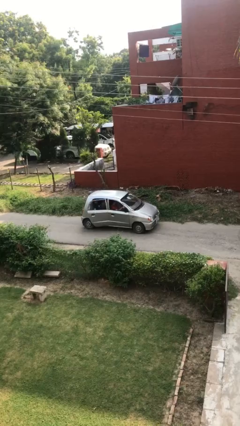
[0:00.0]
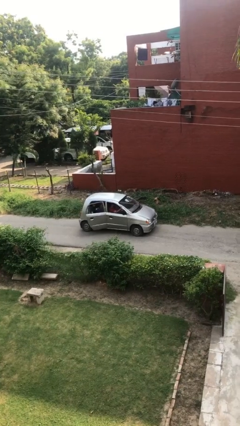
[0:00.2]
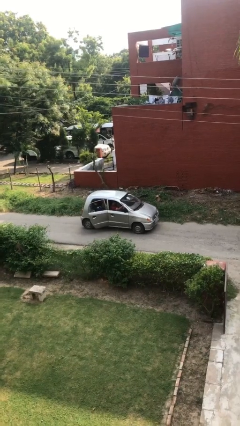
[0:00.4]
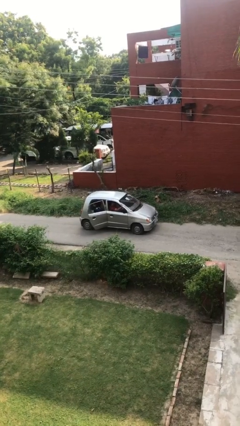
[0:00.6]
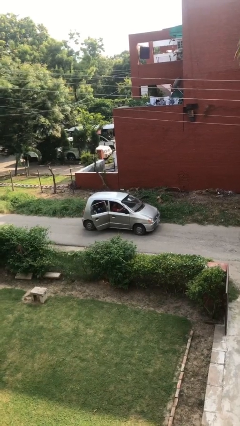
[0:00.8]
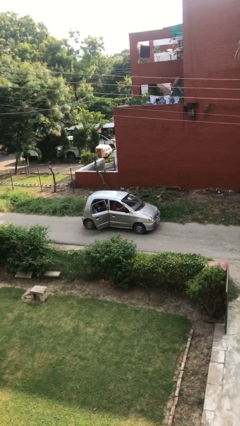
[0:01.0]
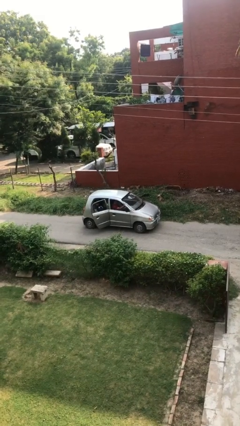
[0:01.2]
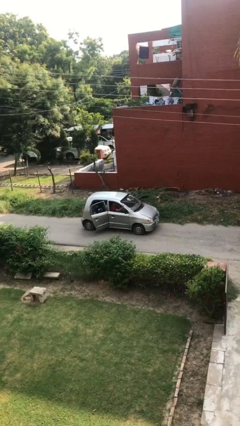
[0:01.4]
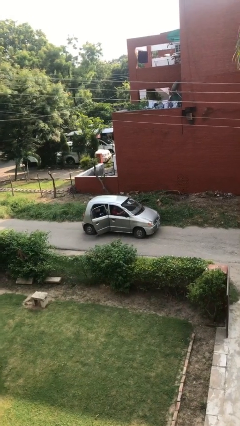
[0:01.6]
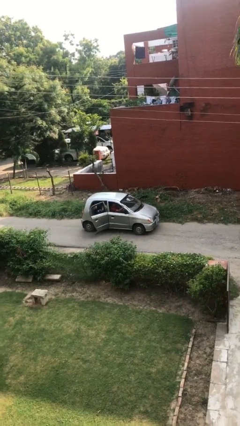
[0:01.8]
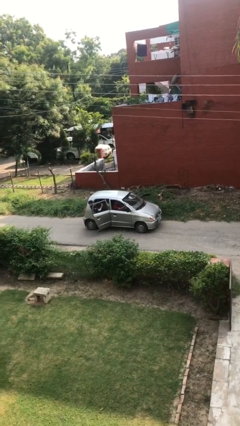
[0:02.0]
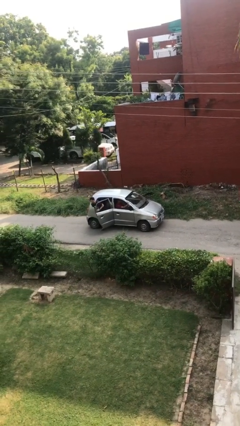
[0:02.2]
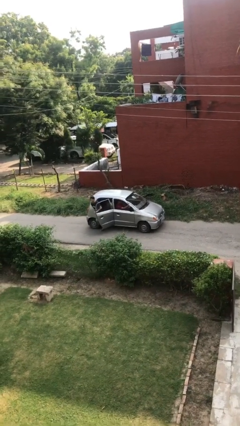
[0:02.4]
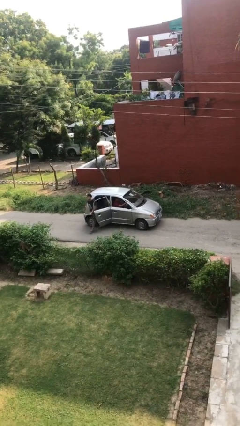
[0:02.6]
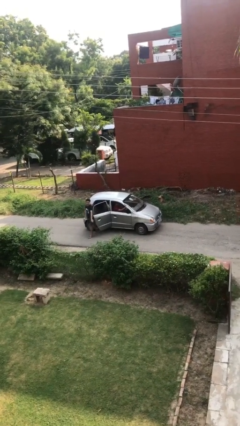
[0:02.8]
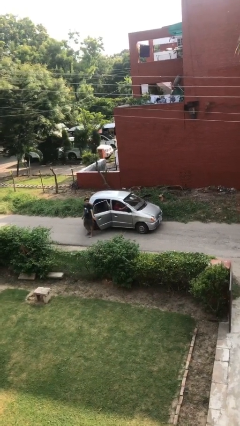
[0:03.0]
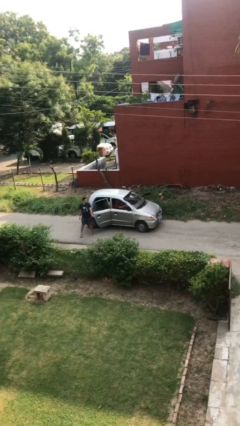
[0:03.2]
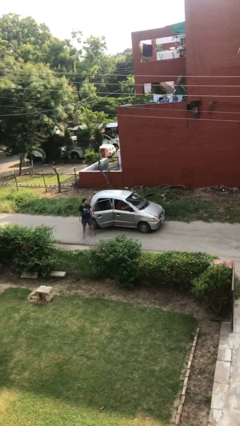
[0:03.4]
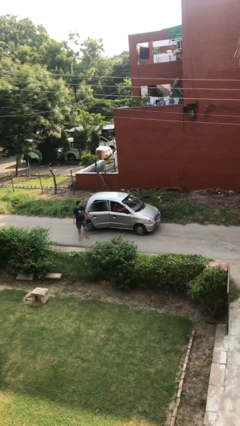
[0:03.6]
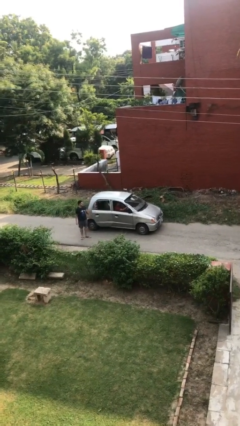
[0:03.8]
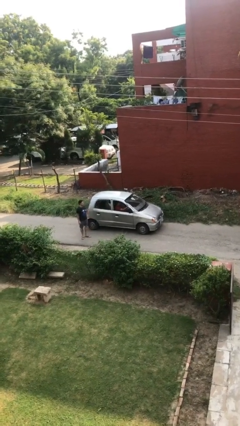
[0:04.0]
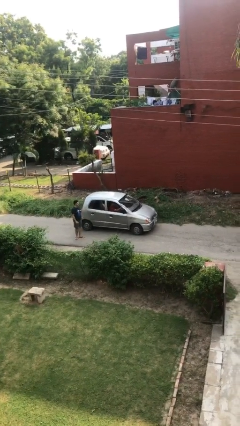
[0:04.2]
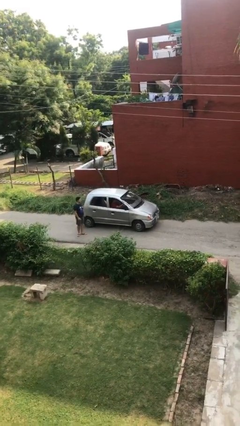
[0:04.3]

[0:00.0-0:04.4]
car drops off person

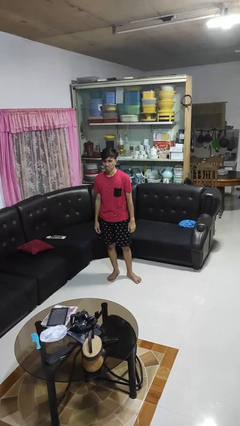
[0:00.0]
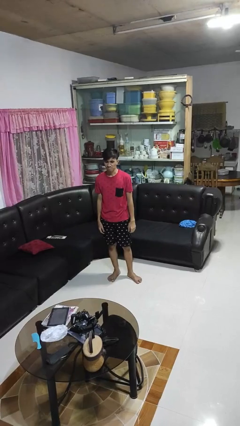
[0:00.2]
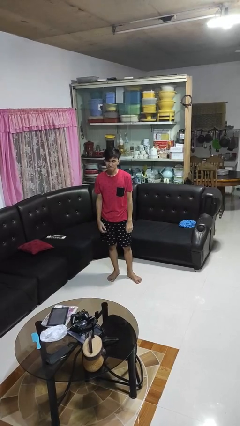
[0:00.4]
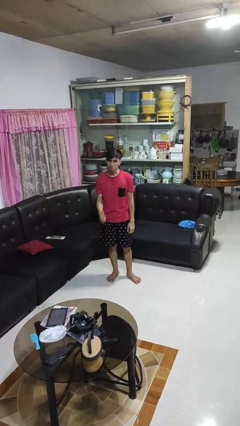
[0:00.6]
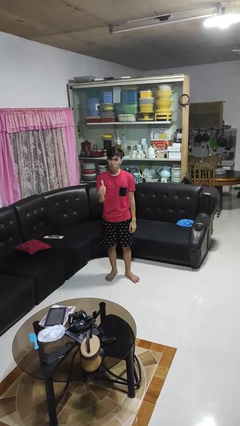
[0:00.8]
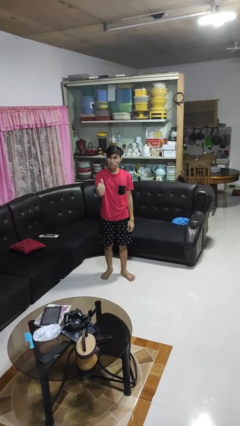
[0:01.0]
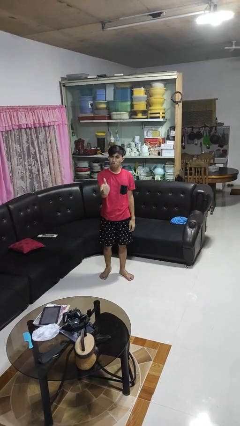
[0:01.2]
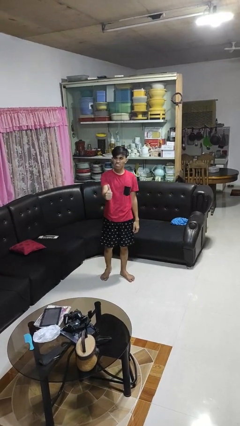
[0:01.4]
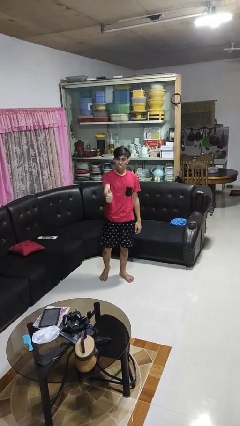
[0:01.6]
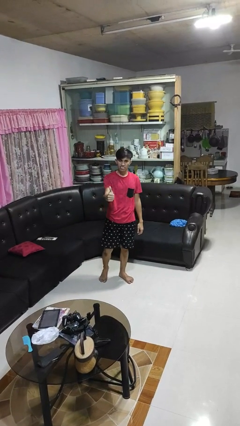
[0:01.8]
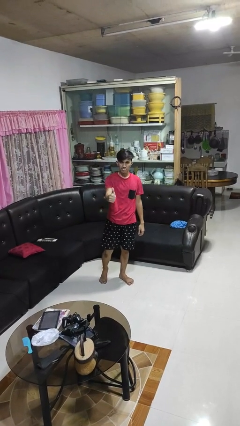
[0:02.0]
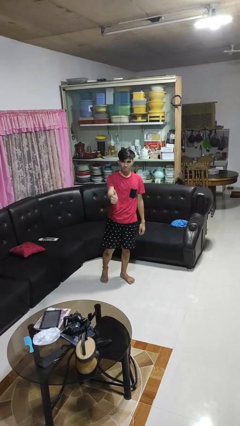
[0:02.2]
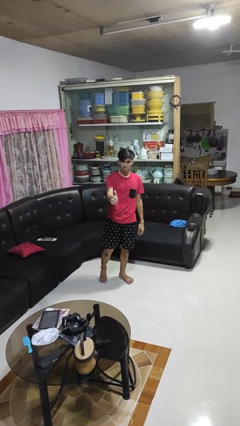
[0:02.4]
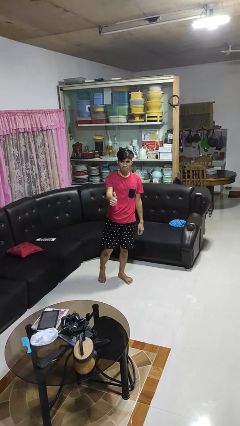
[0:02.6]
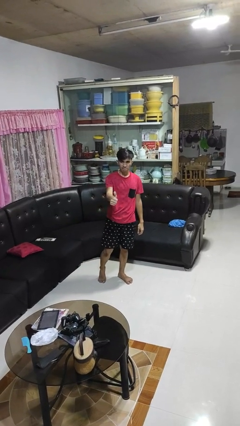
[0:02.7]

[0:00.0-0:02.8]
person gestures thumbs up

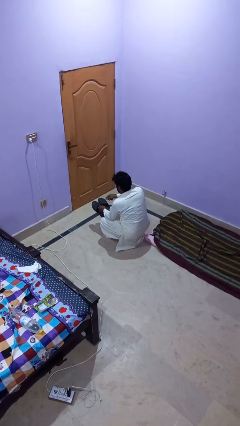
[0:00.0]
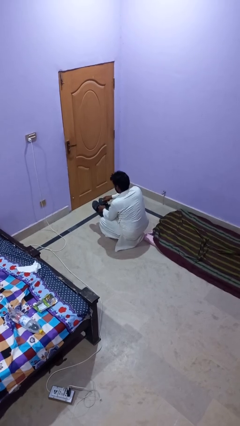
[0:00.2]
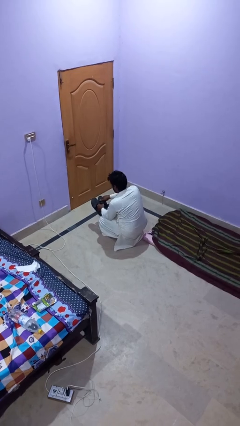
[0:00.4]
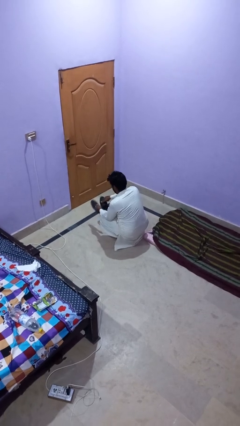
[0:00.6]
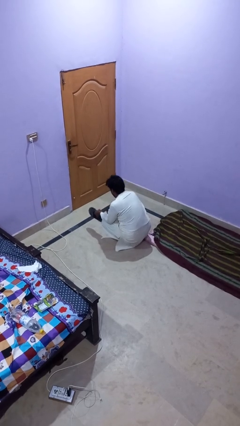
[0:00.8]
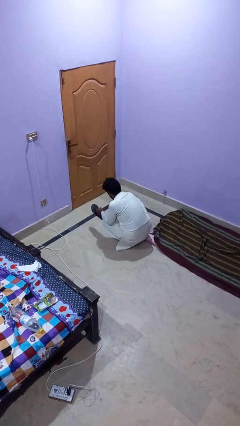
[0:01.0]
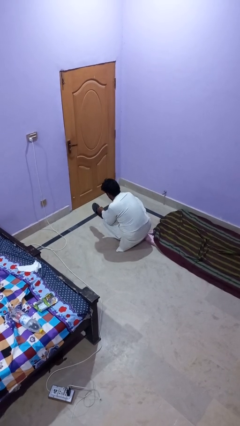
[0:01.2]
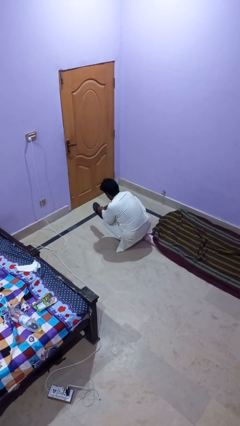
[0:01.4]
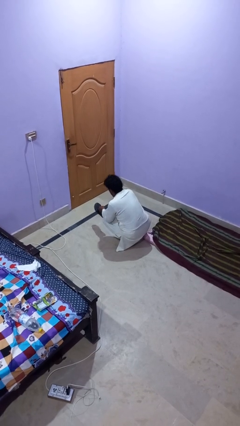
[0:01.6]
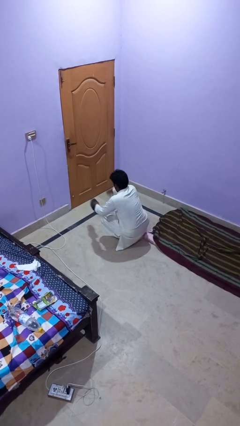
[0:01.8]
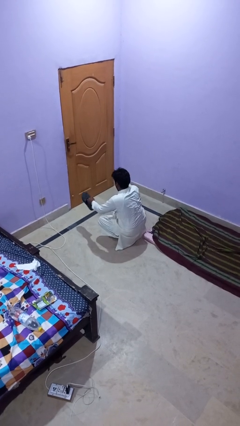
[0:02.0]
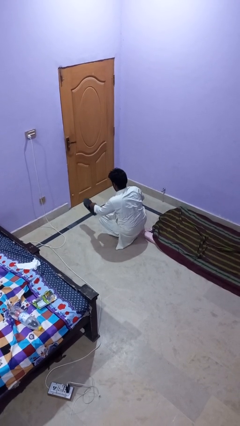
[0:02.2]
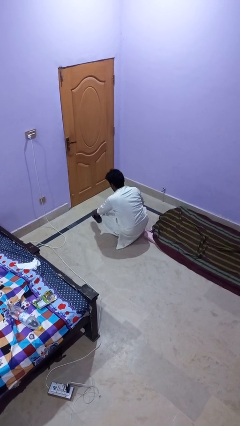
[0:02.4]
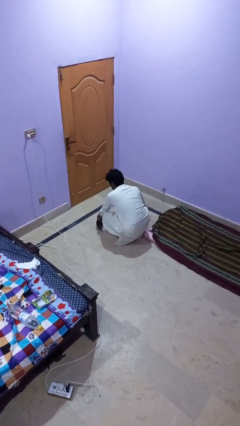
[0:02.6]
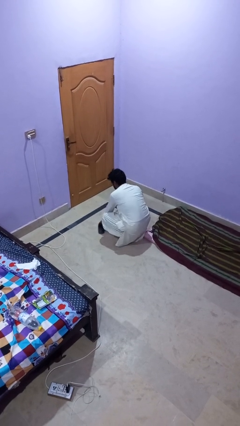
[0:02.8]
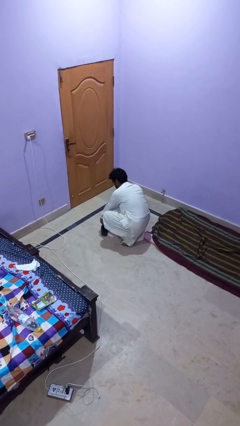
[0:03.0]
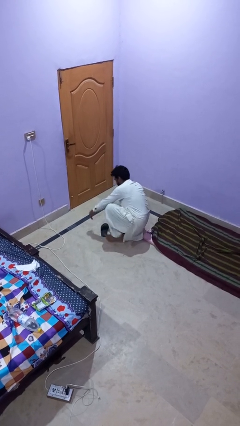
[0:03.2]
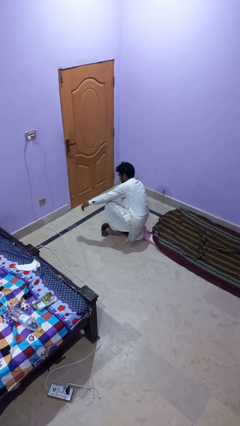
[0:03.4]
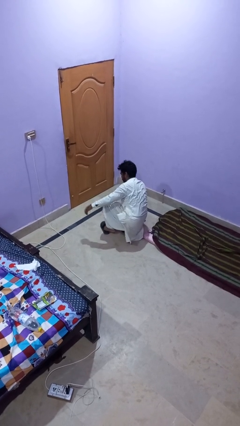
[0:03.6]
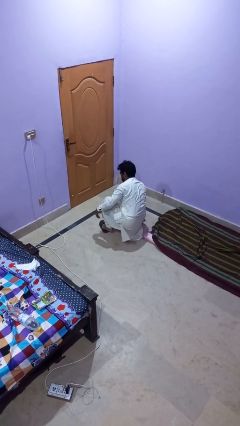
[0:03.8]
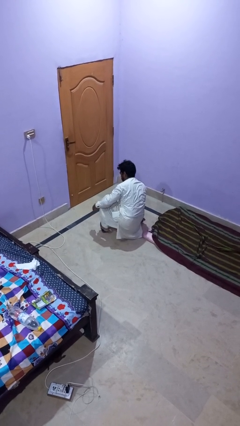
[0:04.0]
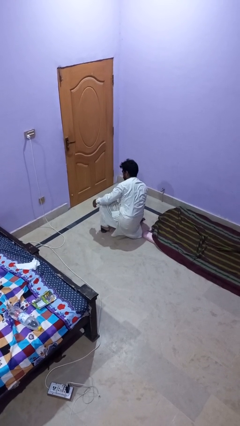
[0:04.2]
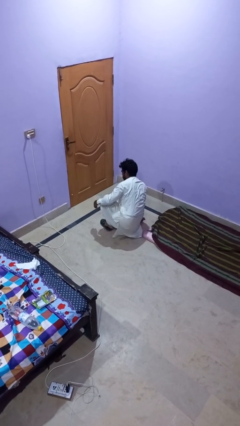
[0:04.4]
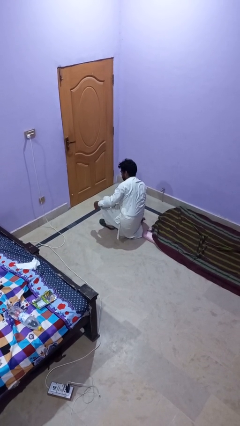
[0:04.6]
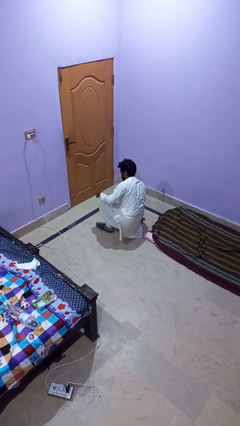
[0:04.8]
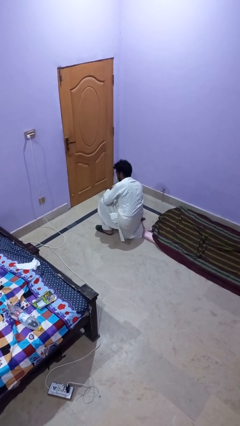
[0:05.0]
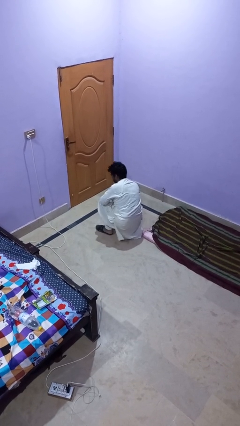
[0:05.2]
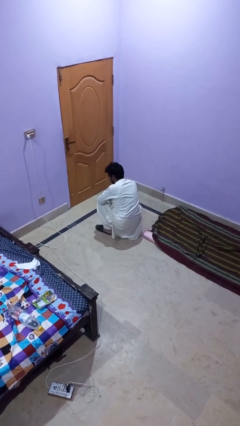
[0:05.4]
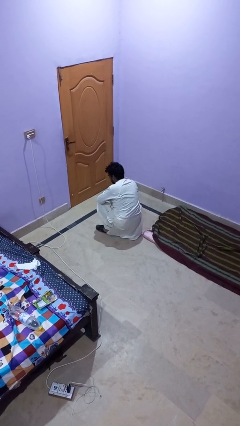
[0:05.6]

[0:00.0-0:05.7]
person puts on shoes

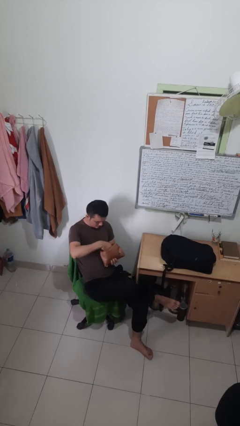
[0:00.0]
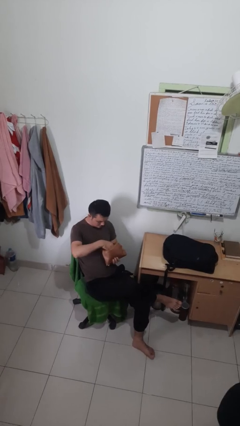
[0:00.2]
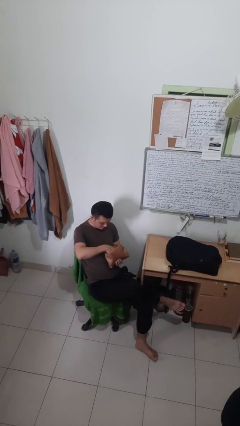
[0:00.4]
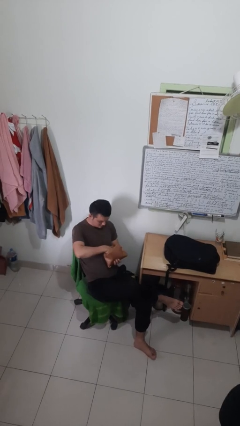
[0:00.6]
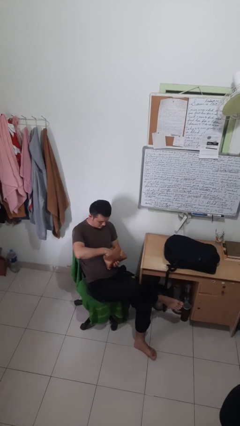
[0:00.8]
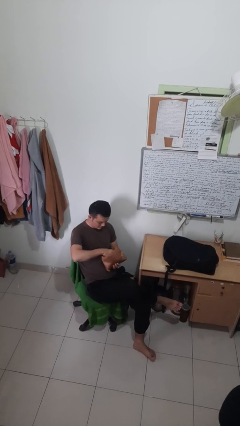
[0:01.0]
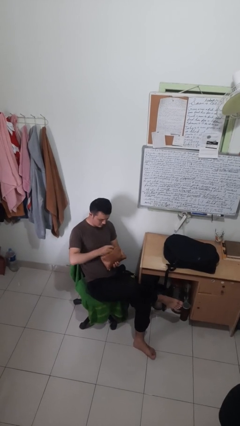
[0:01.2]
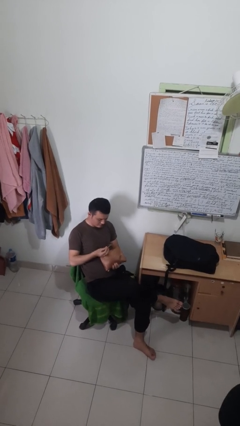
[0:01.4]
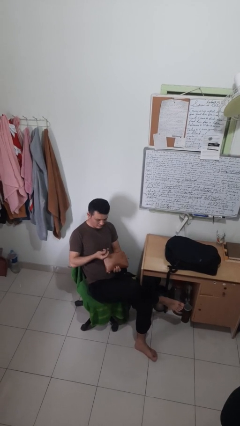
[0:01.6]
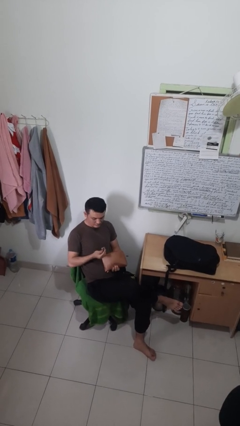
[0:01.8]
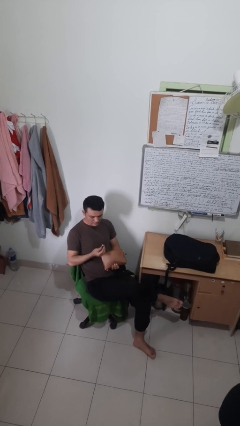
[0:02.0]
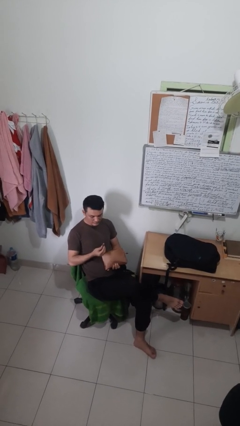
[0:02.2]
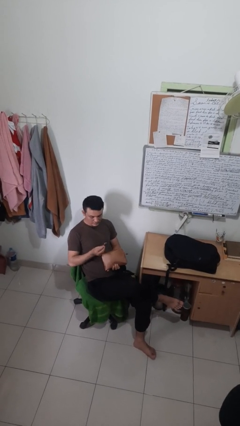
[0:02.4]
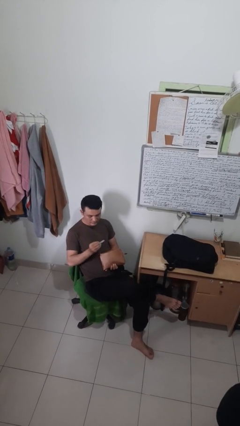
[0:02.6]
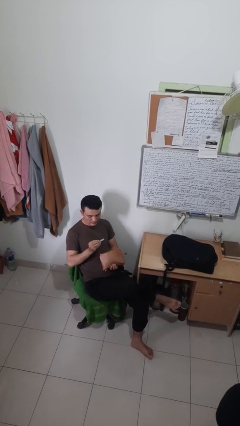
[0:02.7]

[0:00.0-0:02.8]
person takes object from purse

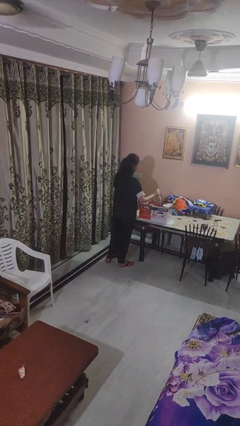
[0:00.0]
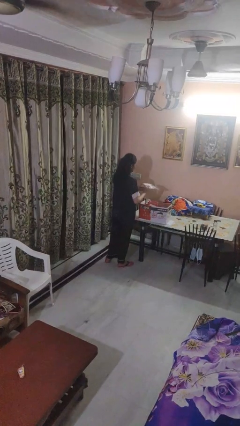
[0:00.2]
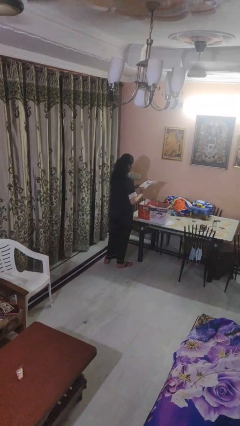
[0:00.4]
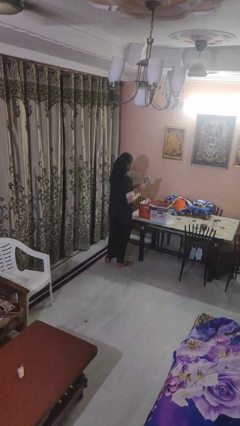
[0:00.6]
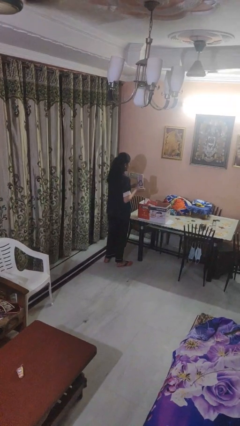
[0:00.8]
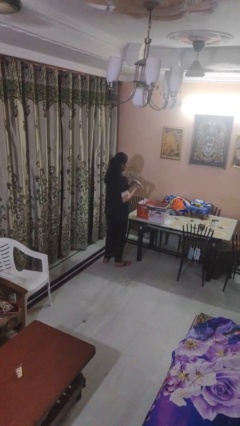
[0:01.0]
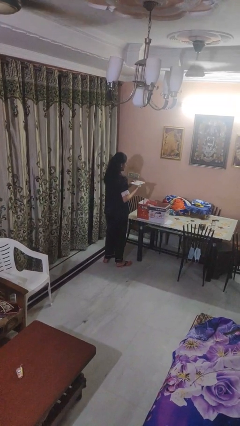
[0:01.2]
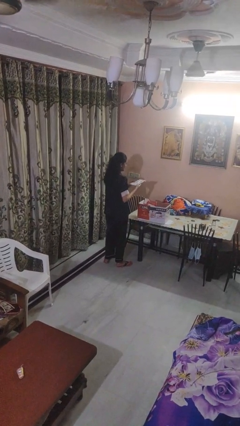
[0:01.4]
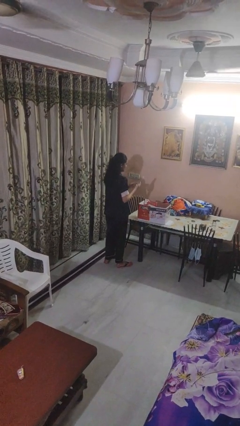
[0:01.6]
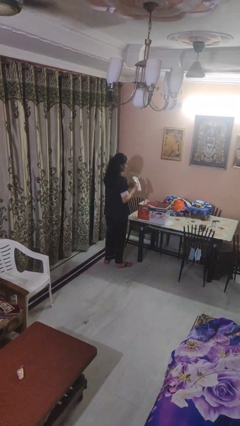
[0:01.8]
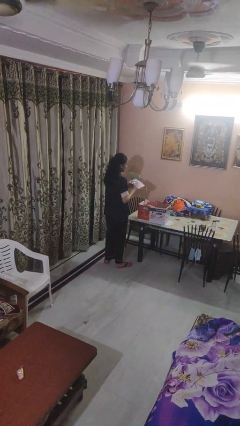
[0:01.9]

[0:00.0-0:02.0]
person takes object from box

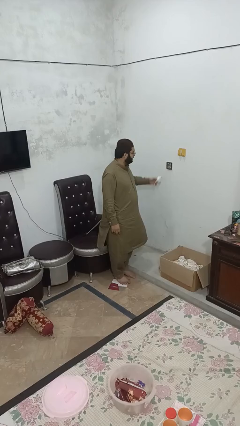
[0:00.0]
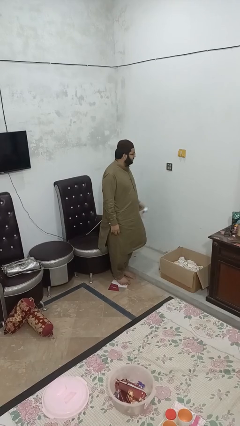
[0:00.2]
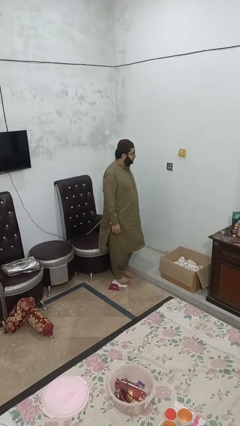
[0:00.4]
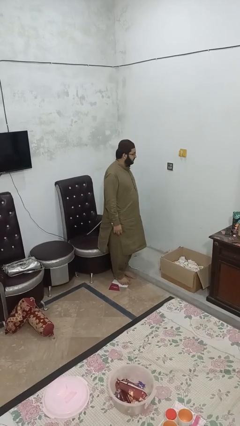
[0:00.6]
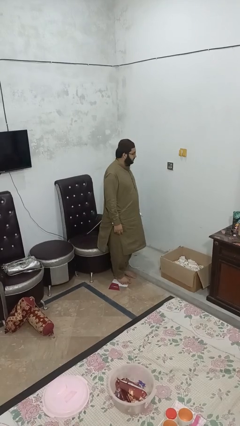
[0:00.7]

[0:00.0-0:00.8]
person unplugs from electrical socket
